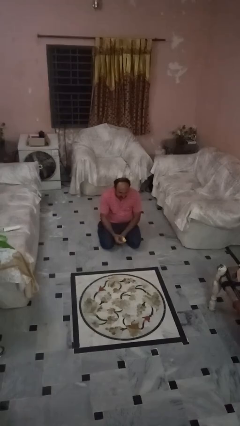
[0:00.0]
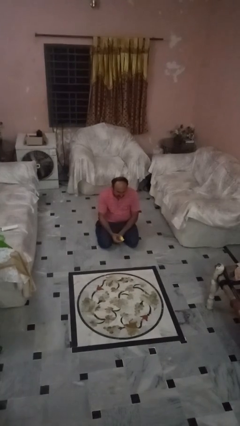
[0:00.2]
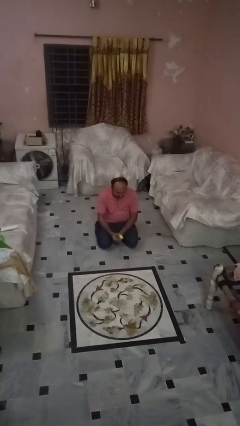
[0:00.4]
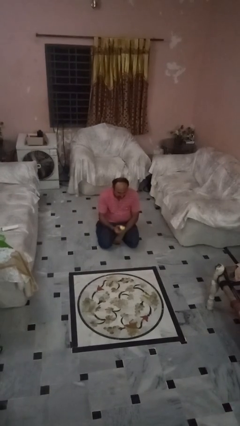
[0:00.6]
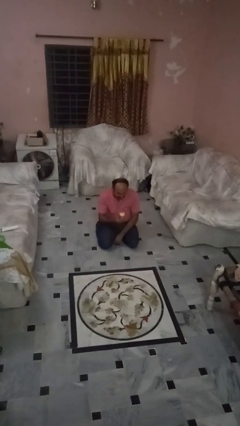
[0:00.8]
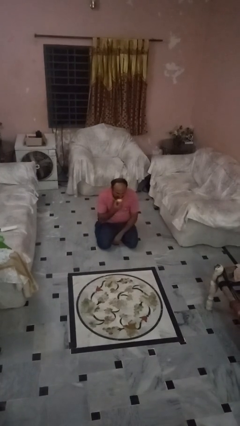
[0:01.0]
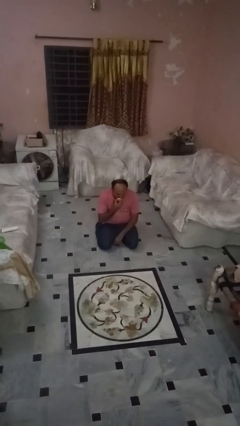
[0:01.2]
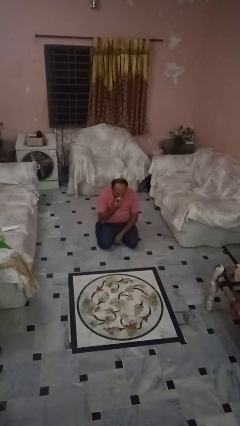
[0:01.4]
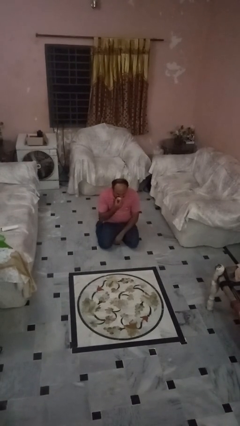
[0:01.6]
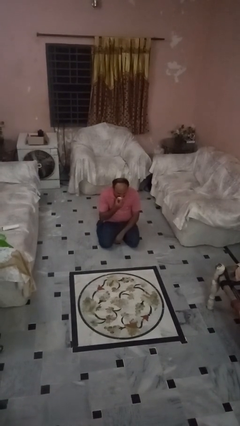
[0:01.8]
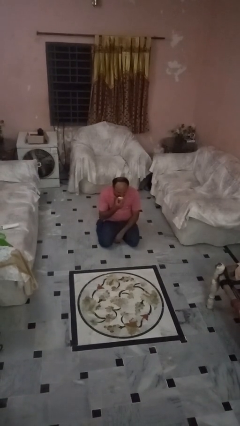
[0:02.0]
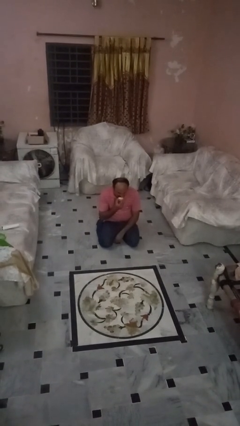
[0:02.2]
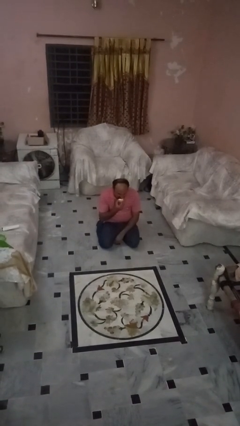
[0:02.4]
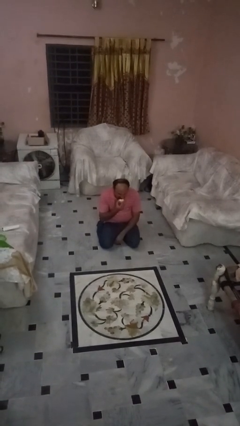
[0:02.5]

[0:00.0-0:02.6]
person eats apple

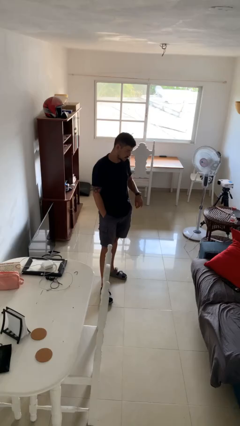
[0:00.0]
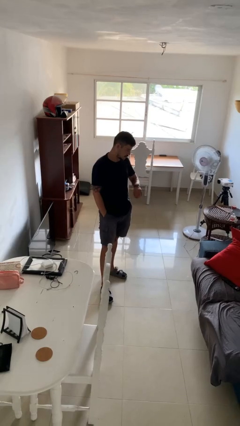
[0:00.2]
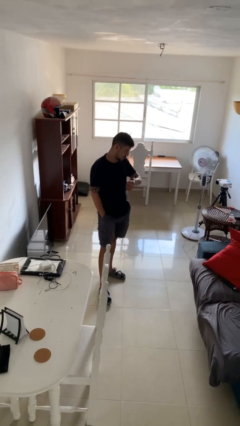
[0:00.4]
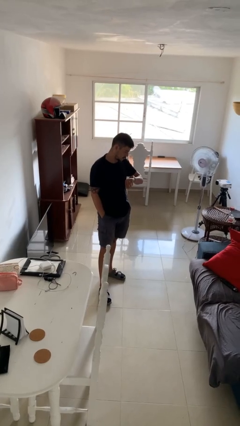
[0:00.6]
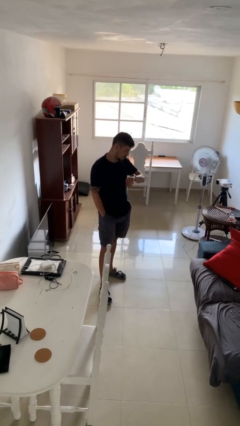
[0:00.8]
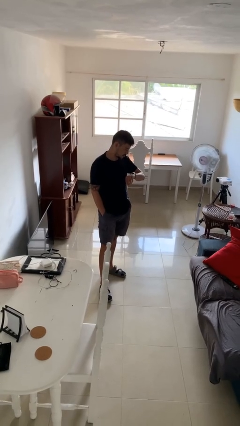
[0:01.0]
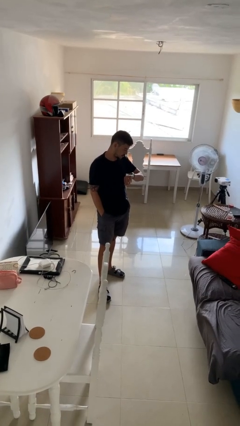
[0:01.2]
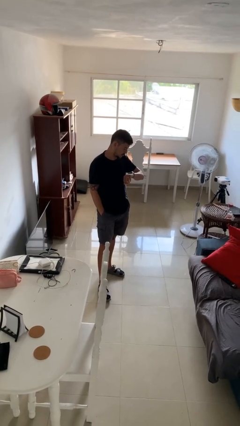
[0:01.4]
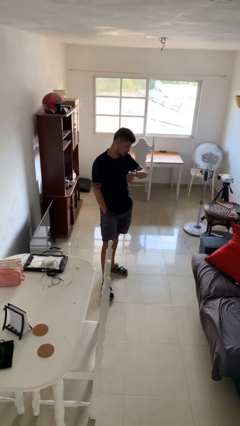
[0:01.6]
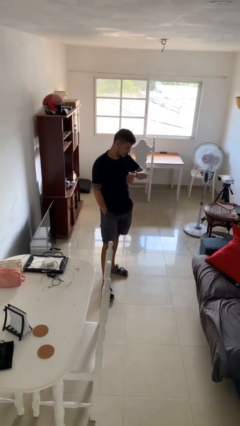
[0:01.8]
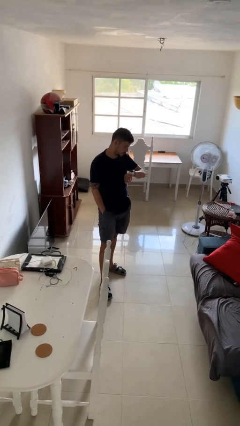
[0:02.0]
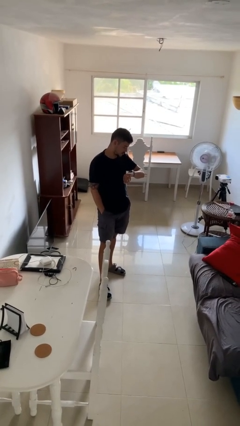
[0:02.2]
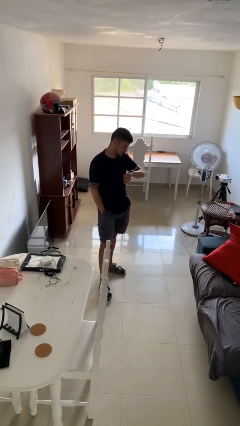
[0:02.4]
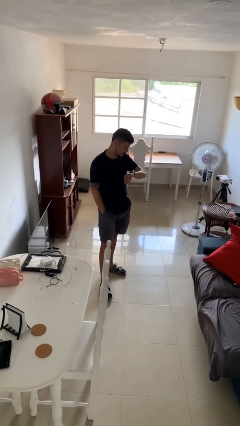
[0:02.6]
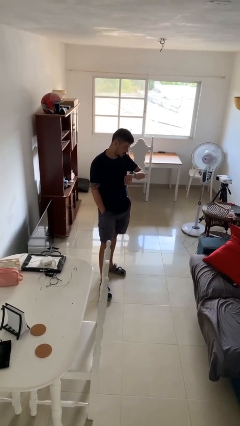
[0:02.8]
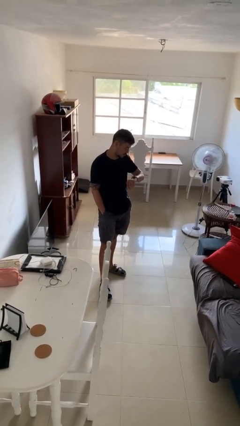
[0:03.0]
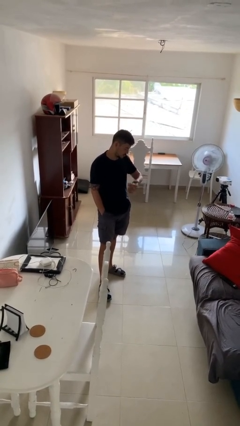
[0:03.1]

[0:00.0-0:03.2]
person looks at wristwatch

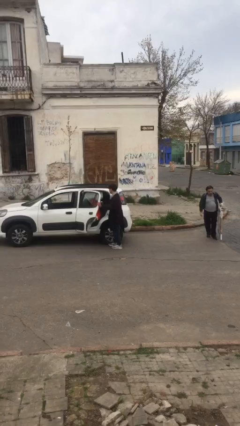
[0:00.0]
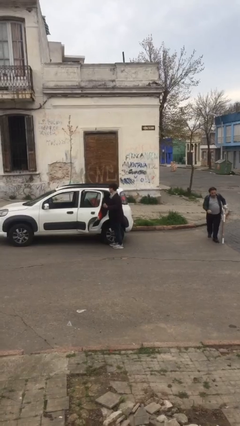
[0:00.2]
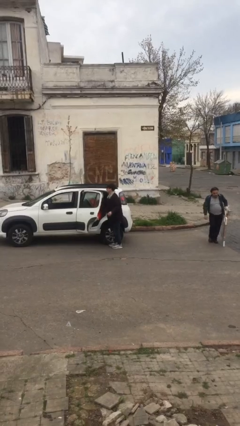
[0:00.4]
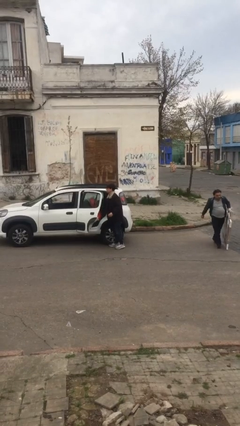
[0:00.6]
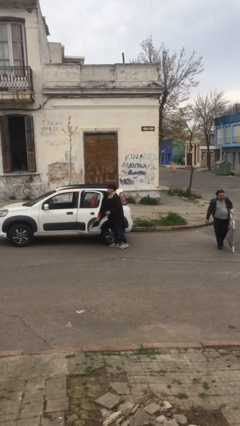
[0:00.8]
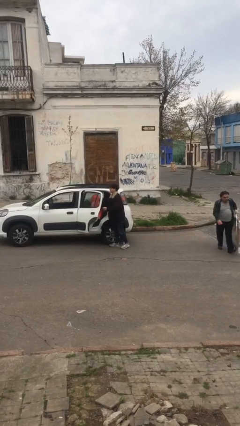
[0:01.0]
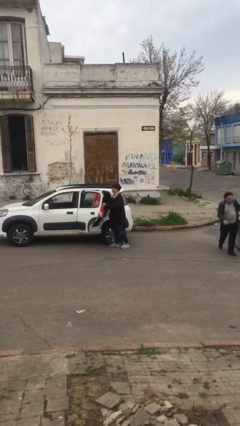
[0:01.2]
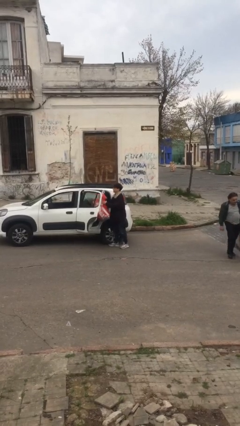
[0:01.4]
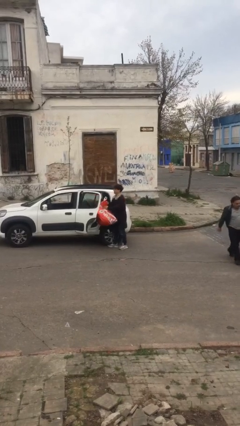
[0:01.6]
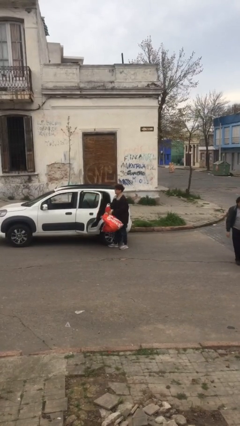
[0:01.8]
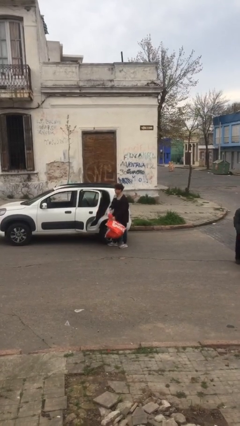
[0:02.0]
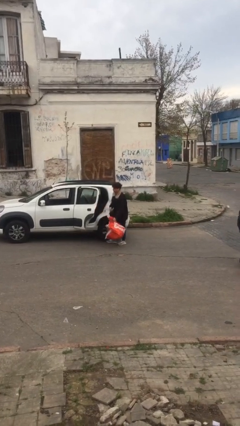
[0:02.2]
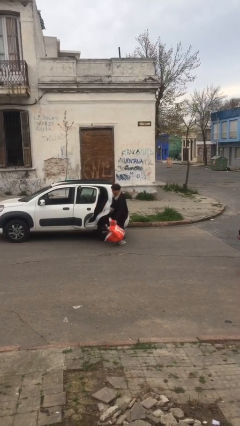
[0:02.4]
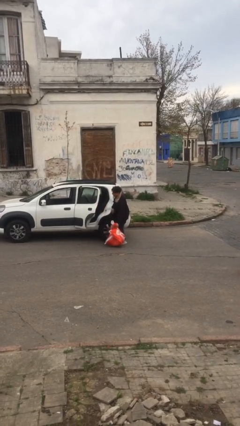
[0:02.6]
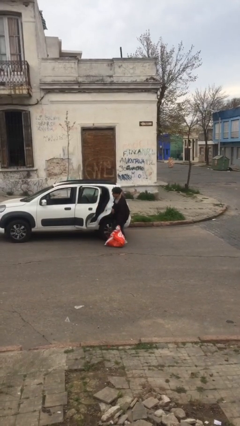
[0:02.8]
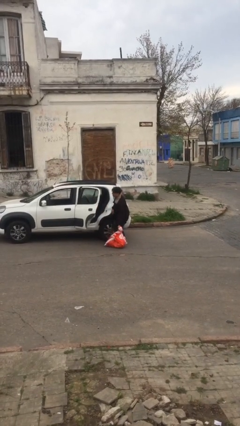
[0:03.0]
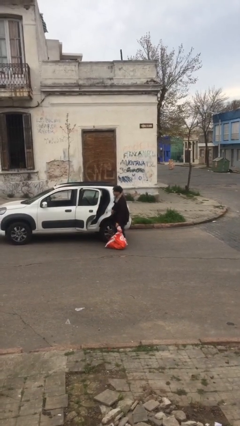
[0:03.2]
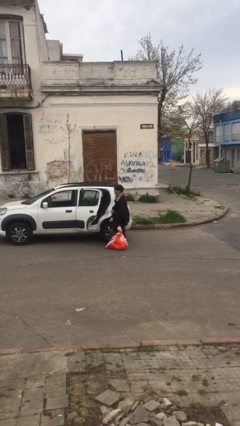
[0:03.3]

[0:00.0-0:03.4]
person unloads car

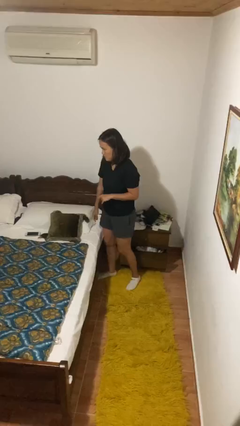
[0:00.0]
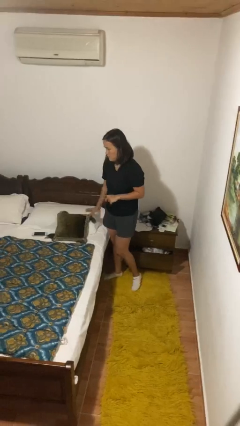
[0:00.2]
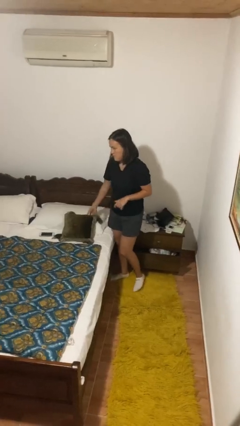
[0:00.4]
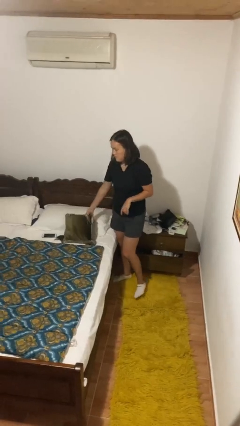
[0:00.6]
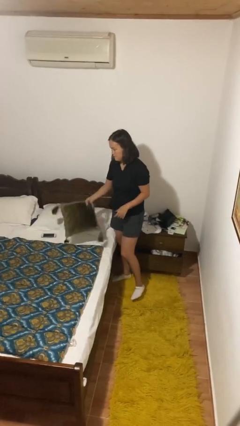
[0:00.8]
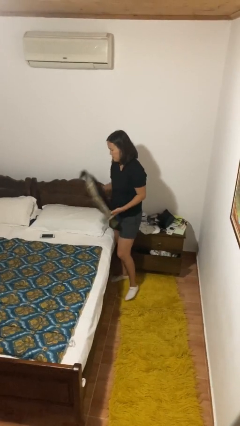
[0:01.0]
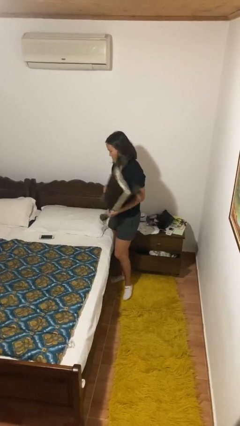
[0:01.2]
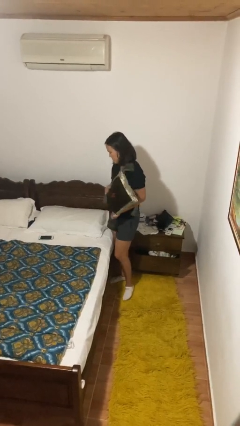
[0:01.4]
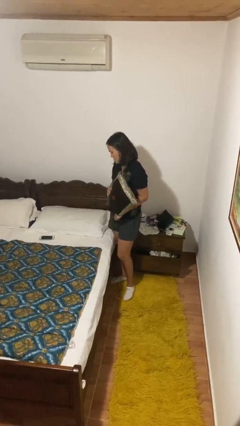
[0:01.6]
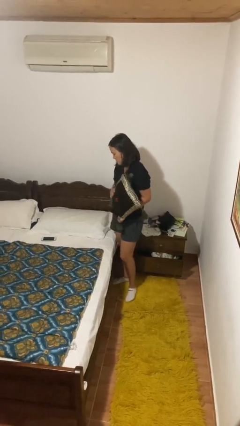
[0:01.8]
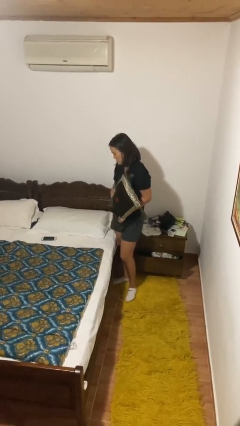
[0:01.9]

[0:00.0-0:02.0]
person picks up object from bed

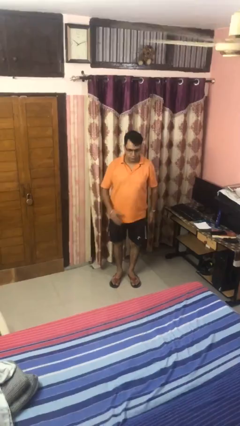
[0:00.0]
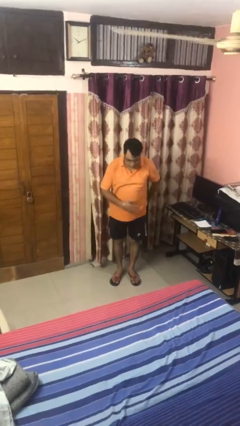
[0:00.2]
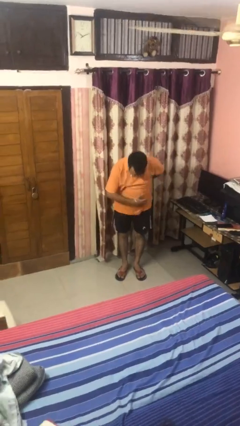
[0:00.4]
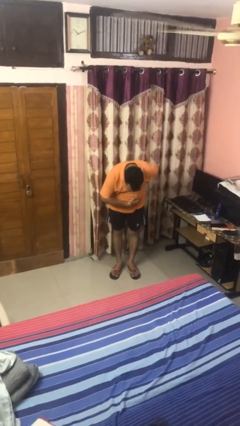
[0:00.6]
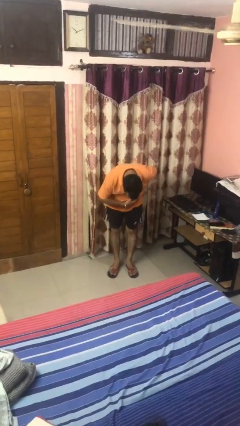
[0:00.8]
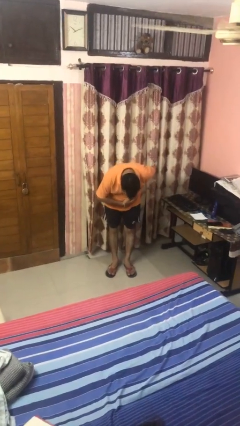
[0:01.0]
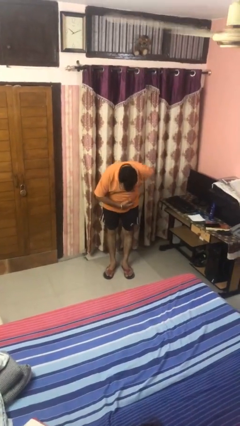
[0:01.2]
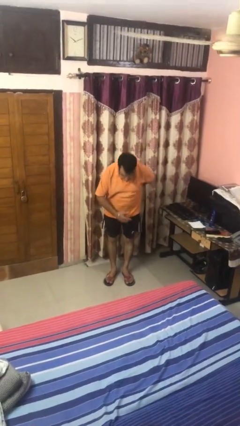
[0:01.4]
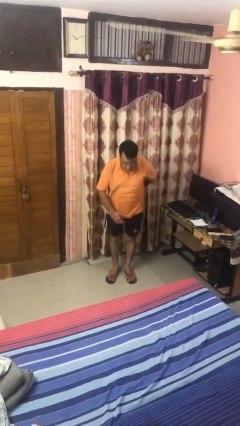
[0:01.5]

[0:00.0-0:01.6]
person bows

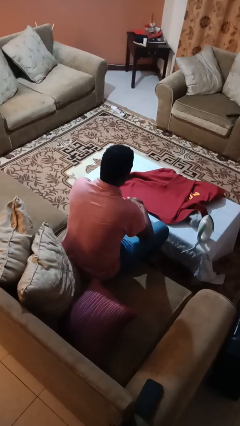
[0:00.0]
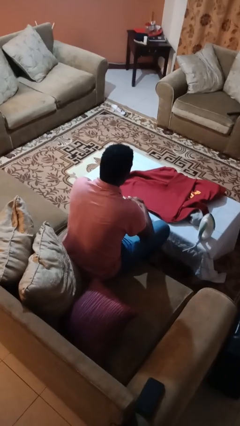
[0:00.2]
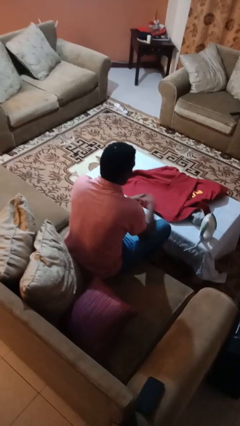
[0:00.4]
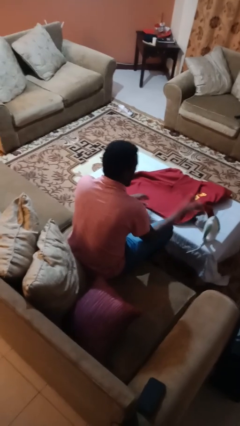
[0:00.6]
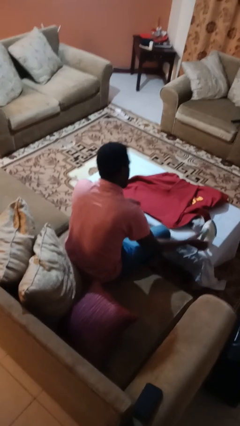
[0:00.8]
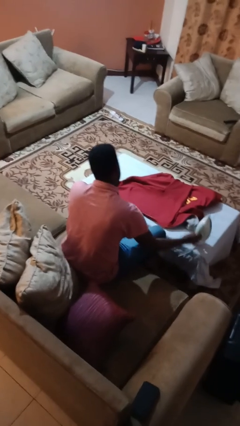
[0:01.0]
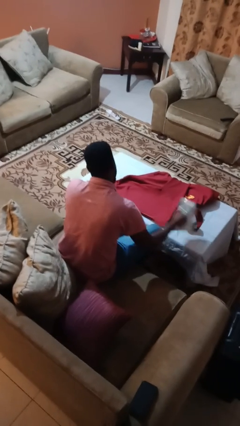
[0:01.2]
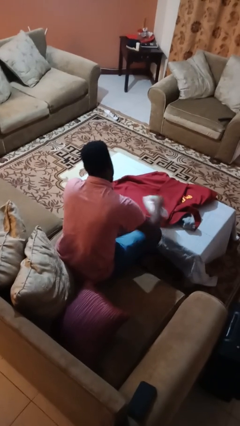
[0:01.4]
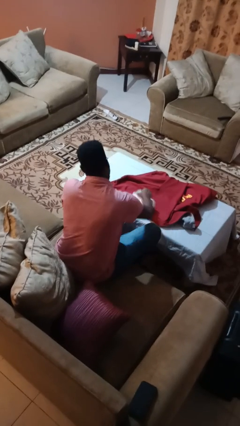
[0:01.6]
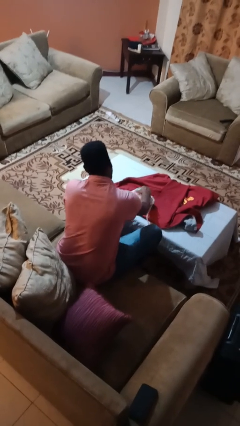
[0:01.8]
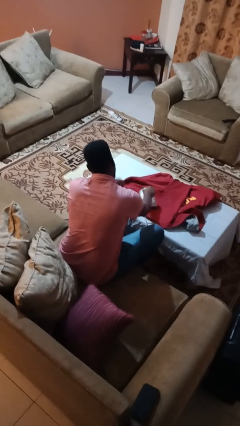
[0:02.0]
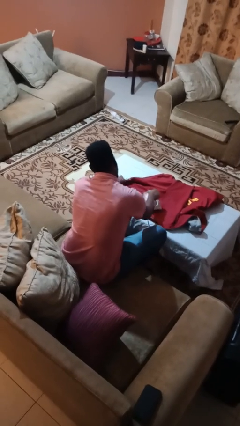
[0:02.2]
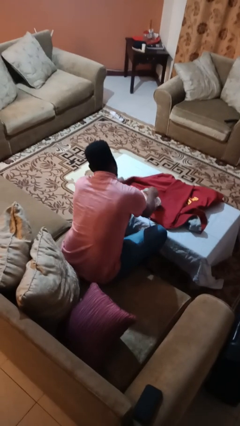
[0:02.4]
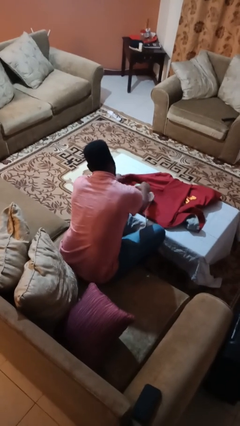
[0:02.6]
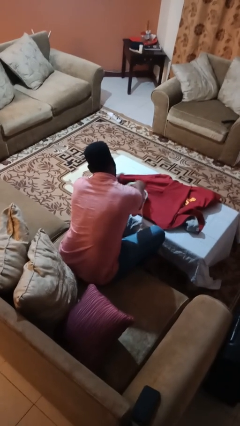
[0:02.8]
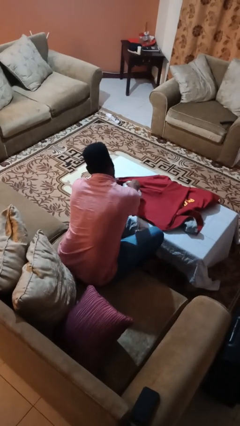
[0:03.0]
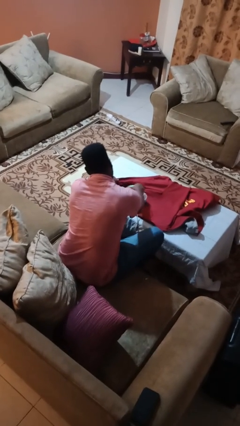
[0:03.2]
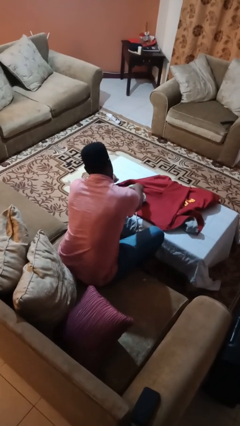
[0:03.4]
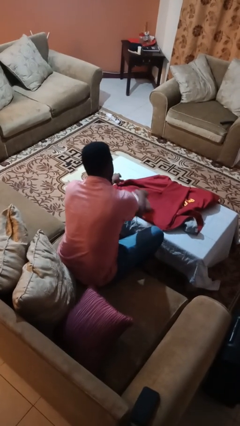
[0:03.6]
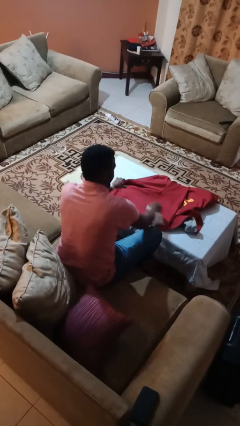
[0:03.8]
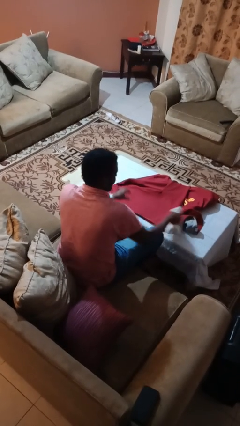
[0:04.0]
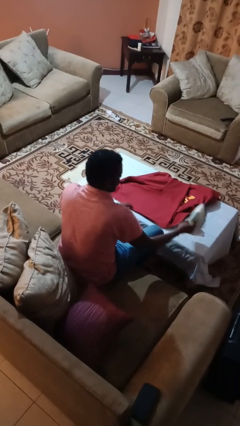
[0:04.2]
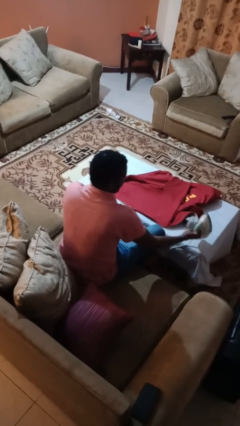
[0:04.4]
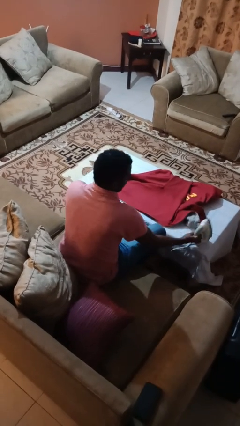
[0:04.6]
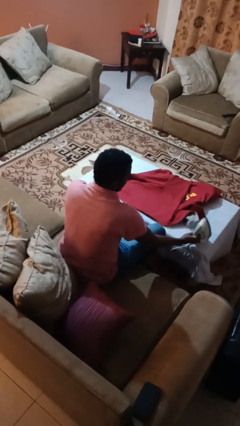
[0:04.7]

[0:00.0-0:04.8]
person irons clothes
